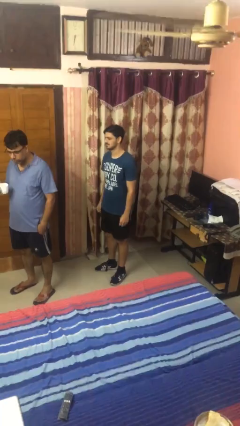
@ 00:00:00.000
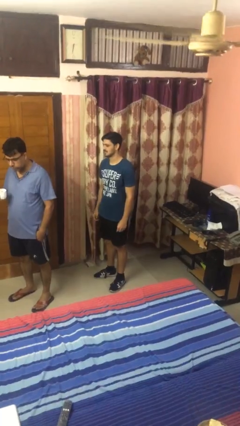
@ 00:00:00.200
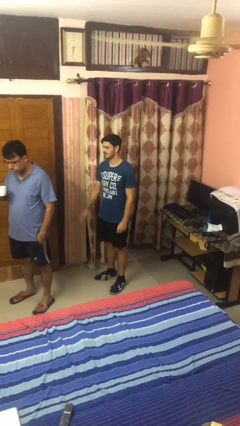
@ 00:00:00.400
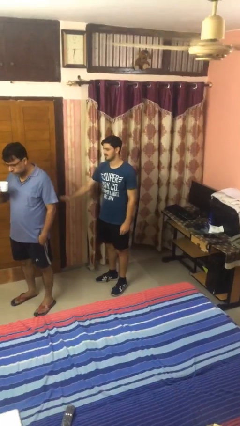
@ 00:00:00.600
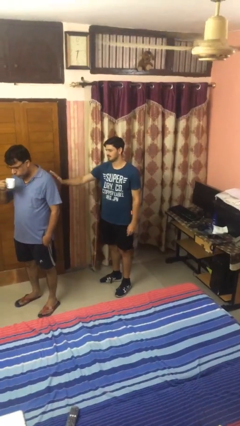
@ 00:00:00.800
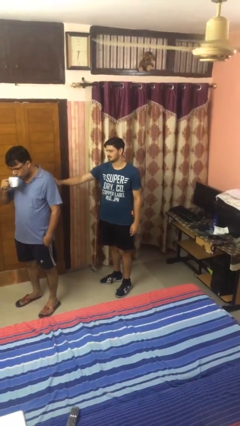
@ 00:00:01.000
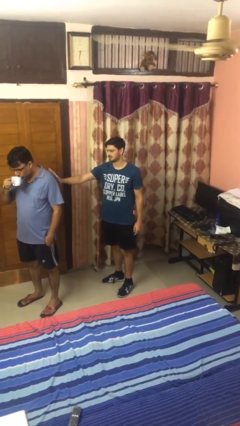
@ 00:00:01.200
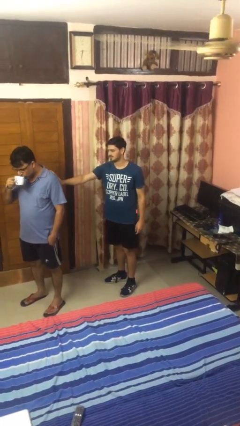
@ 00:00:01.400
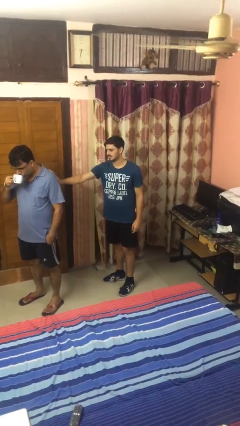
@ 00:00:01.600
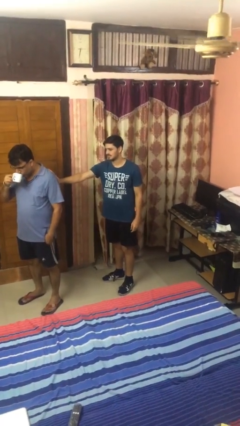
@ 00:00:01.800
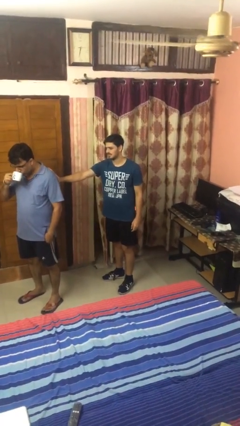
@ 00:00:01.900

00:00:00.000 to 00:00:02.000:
person touches back of person

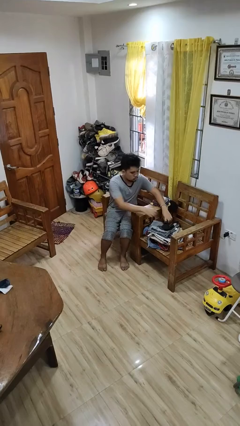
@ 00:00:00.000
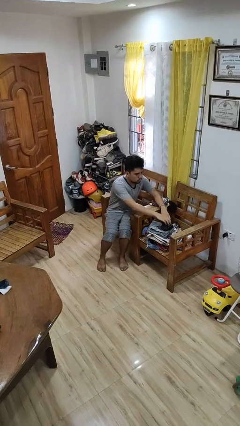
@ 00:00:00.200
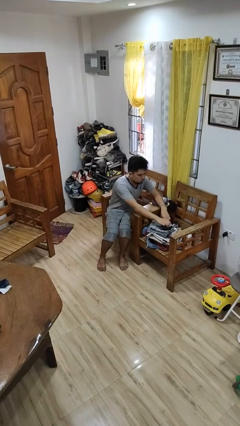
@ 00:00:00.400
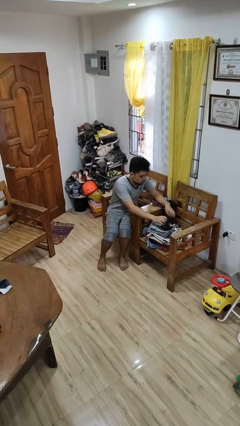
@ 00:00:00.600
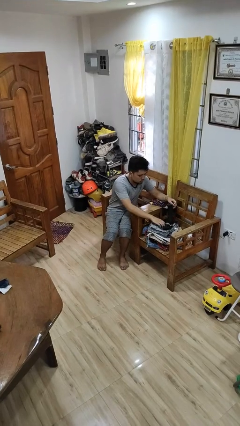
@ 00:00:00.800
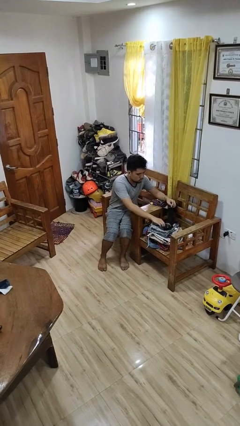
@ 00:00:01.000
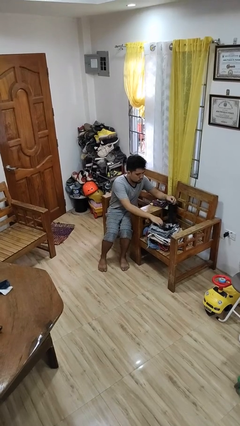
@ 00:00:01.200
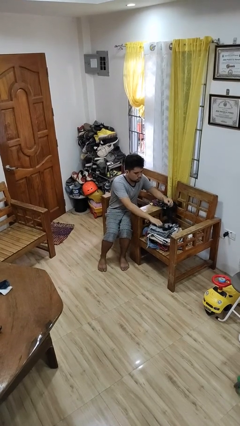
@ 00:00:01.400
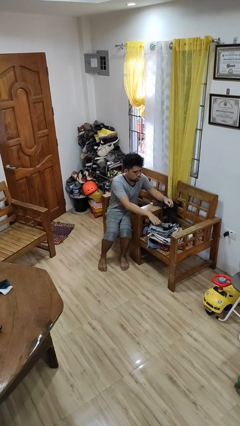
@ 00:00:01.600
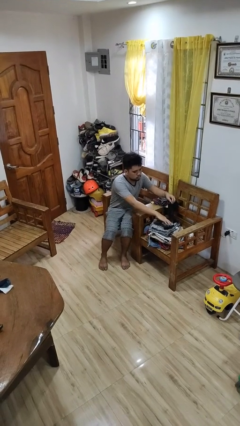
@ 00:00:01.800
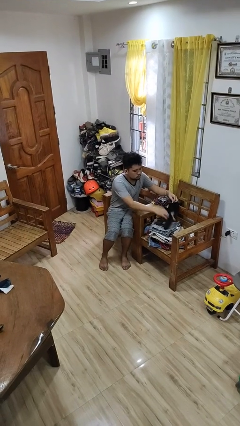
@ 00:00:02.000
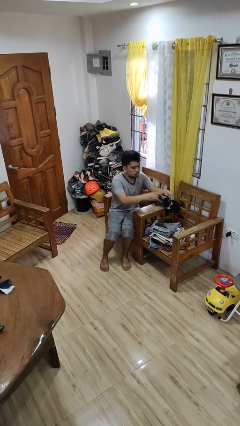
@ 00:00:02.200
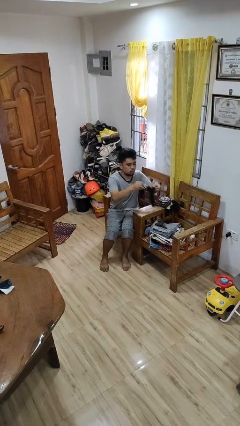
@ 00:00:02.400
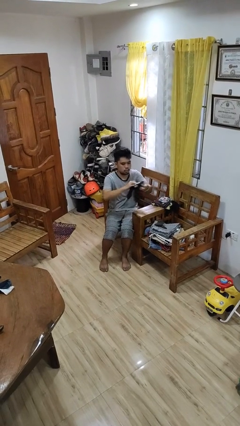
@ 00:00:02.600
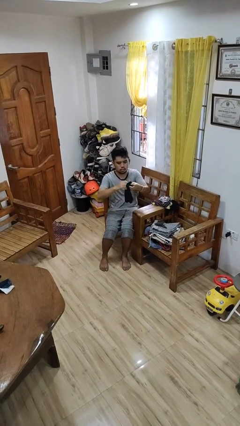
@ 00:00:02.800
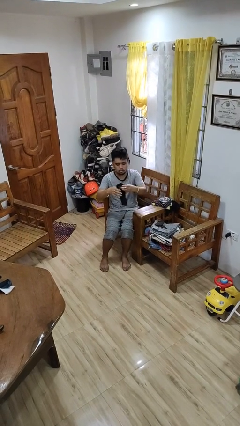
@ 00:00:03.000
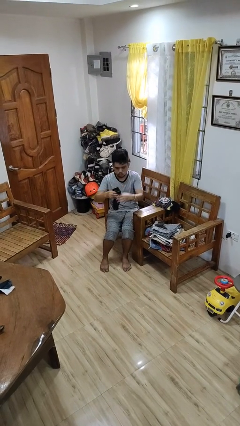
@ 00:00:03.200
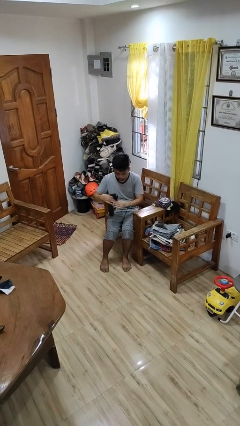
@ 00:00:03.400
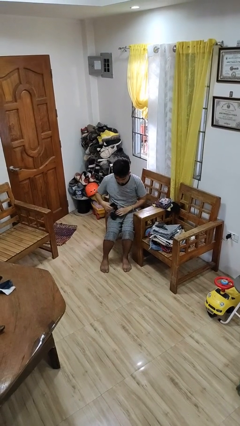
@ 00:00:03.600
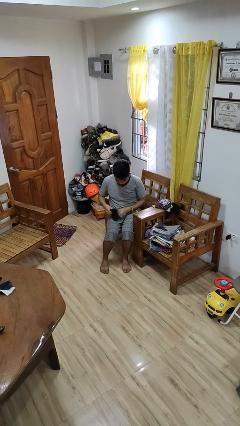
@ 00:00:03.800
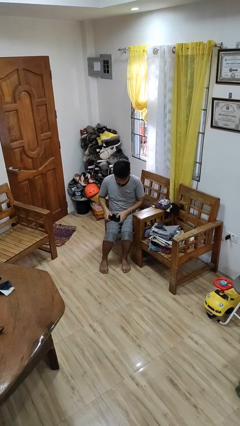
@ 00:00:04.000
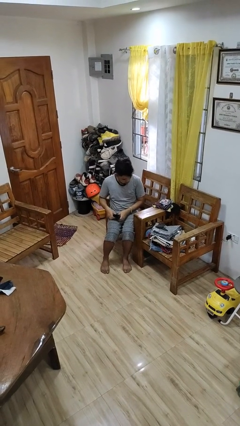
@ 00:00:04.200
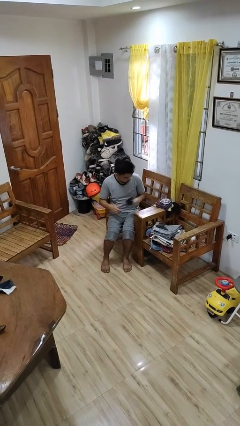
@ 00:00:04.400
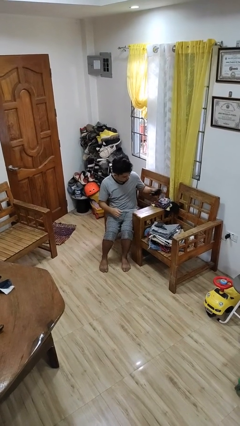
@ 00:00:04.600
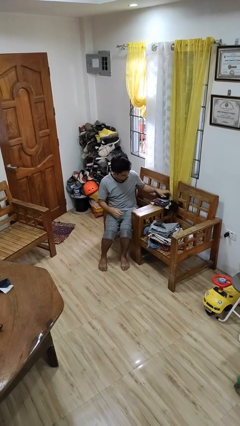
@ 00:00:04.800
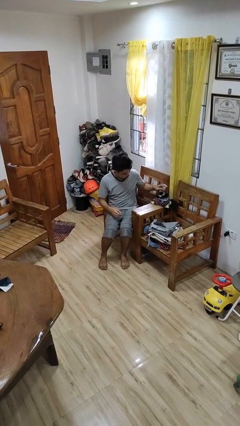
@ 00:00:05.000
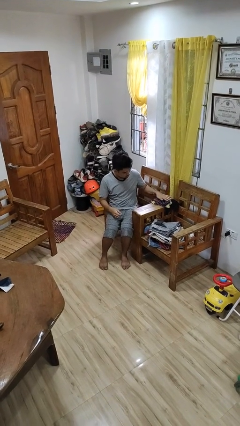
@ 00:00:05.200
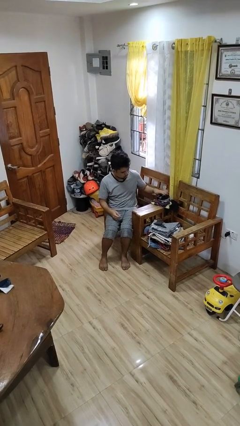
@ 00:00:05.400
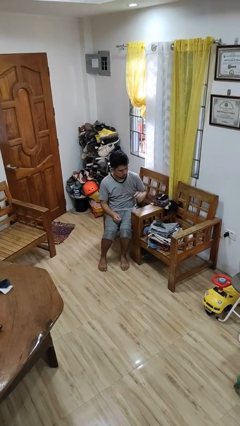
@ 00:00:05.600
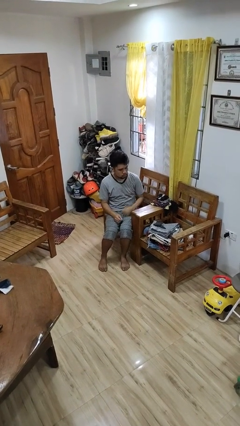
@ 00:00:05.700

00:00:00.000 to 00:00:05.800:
person folds socks

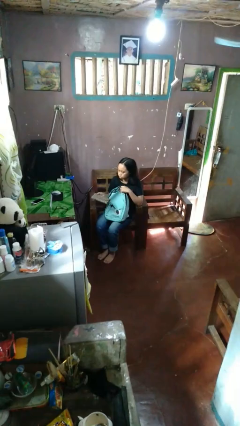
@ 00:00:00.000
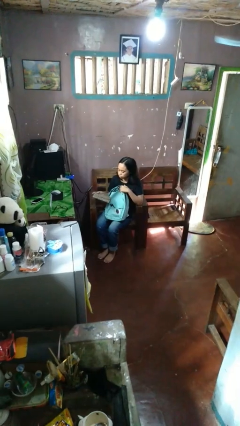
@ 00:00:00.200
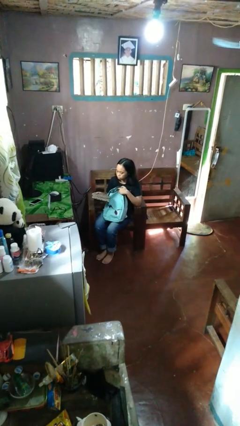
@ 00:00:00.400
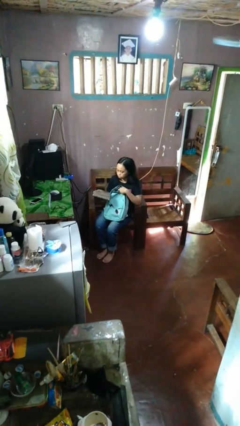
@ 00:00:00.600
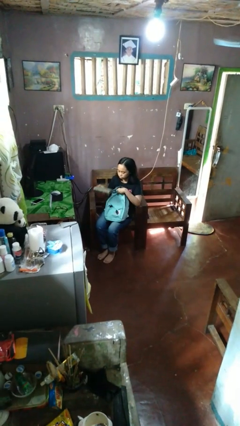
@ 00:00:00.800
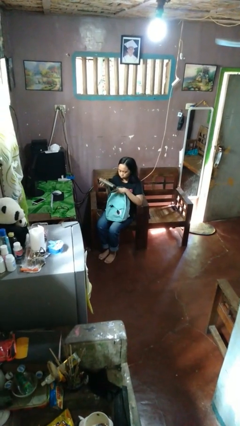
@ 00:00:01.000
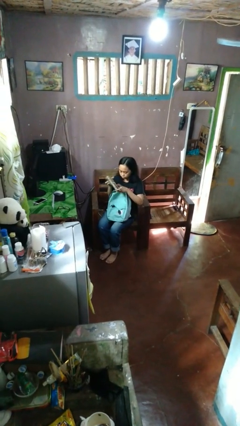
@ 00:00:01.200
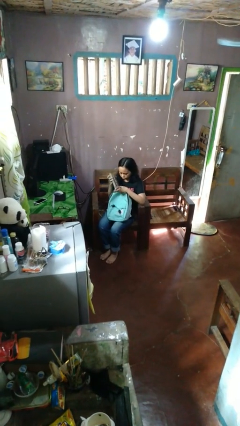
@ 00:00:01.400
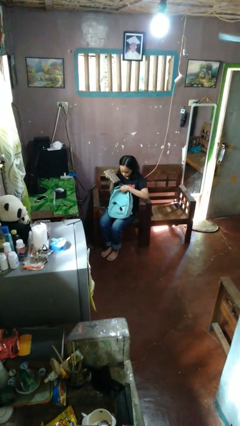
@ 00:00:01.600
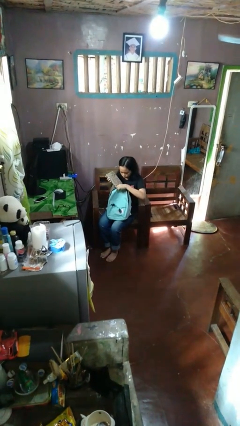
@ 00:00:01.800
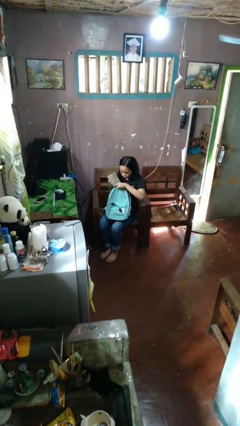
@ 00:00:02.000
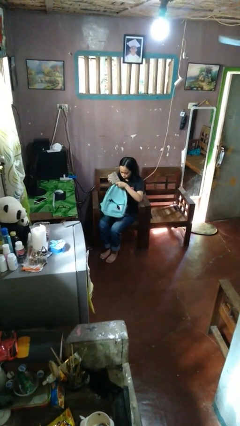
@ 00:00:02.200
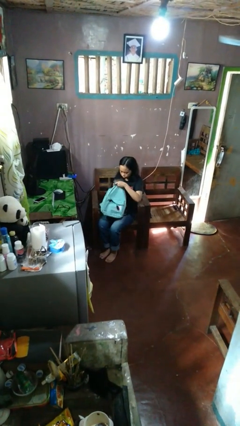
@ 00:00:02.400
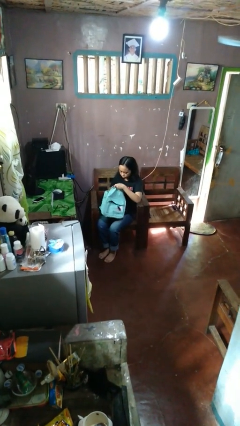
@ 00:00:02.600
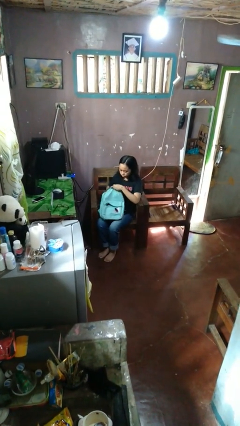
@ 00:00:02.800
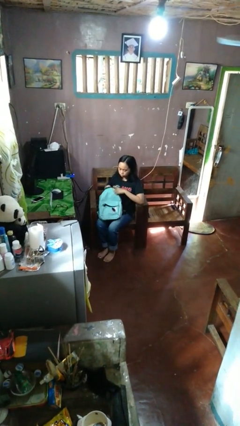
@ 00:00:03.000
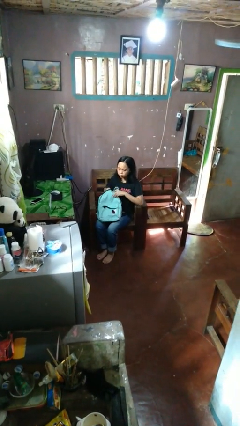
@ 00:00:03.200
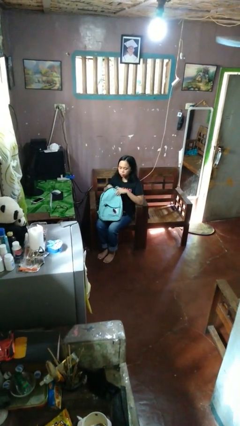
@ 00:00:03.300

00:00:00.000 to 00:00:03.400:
person puts object into backpack

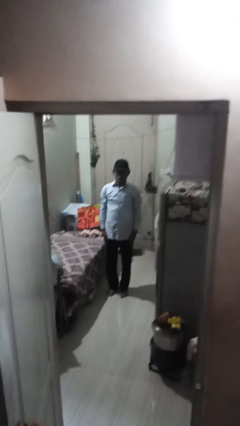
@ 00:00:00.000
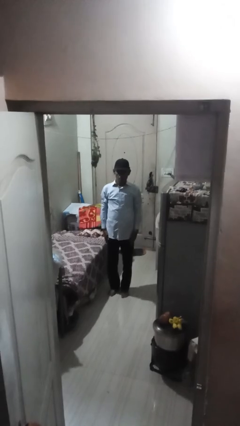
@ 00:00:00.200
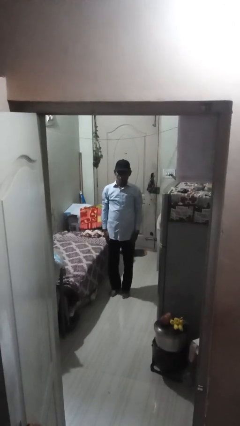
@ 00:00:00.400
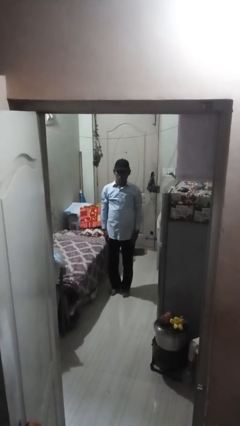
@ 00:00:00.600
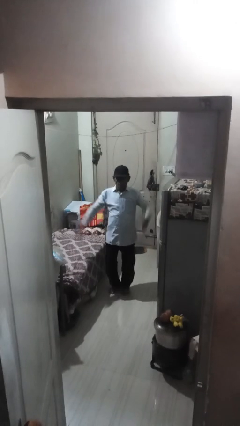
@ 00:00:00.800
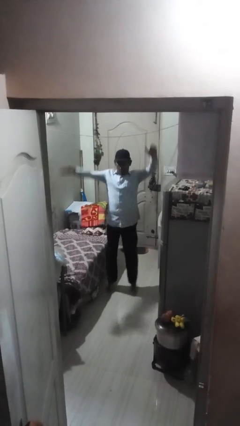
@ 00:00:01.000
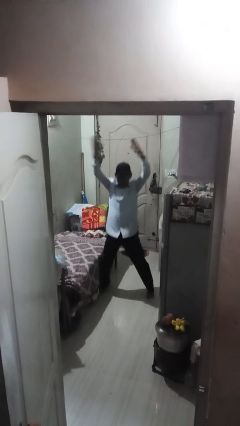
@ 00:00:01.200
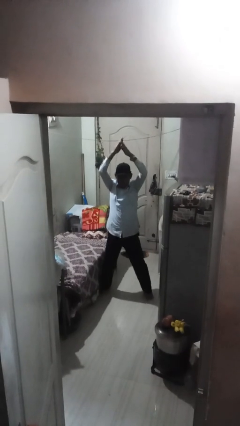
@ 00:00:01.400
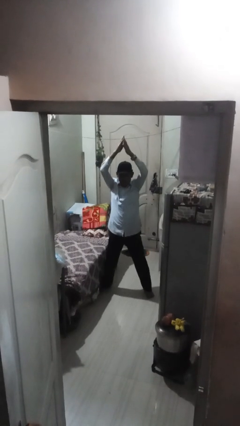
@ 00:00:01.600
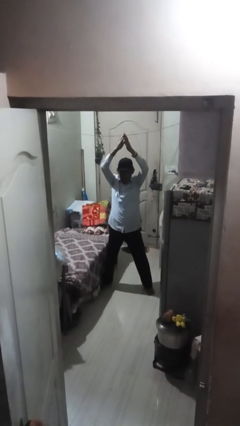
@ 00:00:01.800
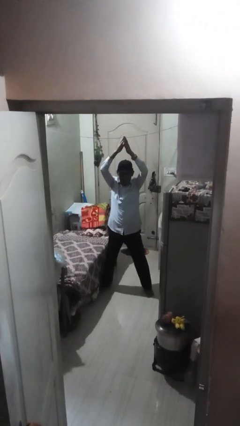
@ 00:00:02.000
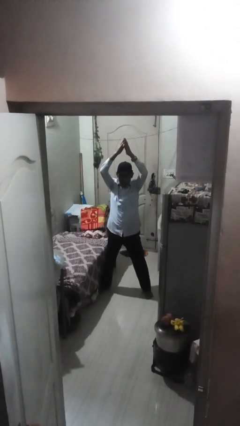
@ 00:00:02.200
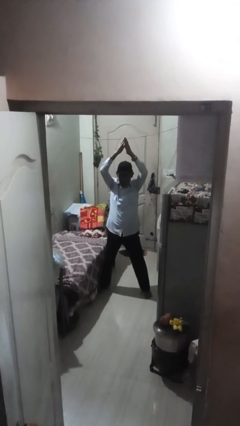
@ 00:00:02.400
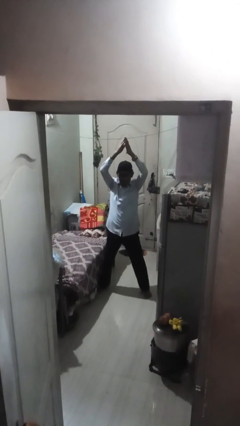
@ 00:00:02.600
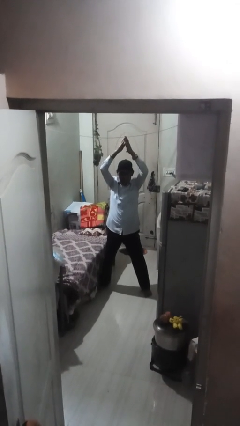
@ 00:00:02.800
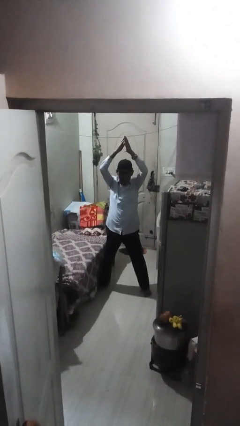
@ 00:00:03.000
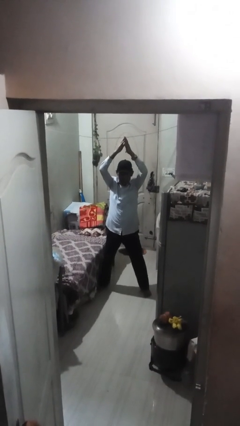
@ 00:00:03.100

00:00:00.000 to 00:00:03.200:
person exercises with jumping jacks

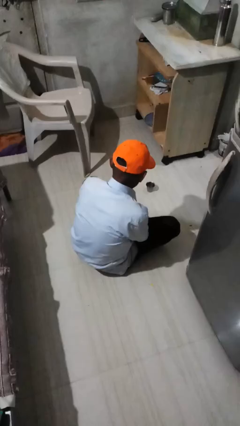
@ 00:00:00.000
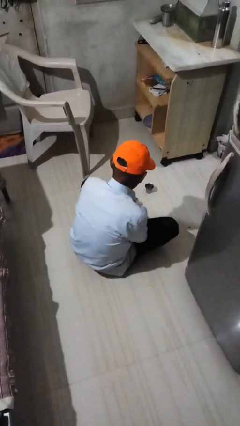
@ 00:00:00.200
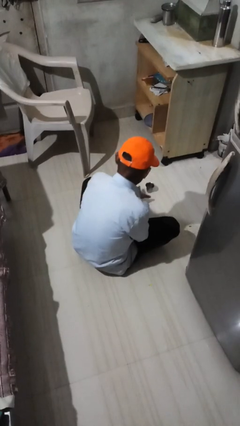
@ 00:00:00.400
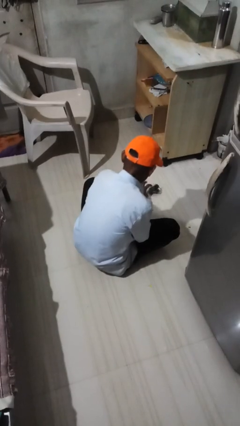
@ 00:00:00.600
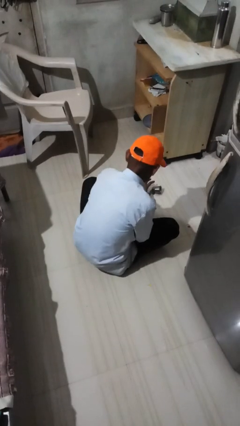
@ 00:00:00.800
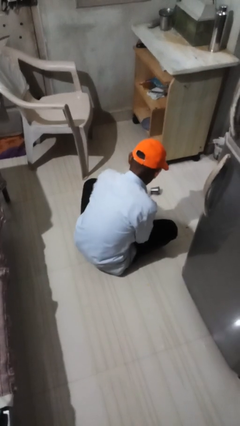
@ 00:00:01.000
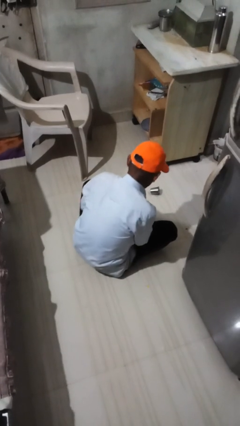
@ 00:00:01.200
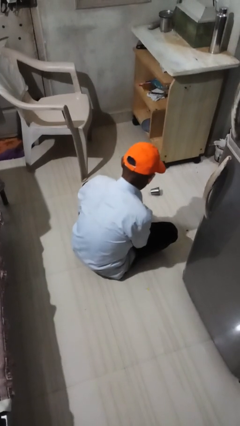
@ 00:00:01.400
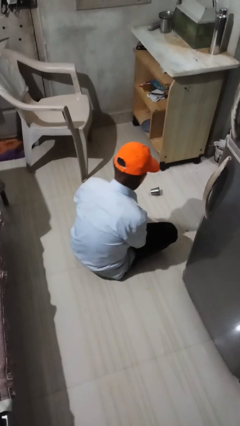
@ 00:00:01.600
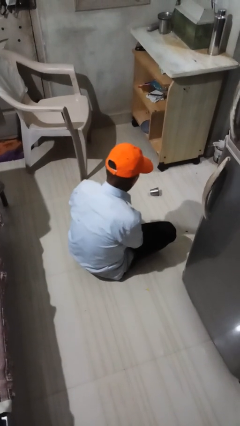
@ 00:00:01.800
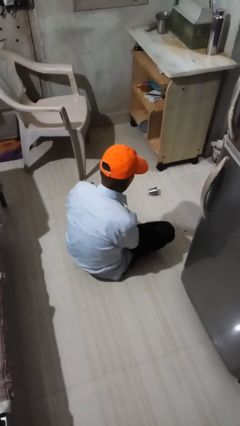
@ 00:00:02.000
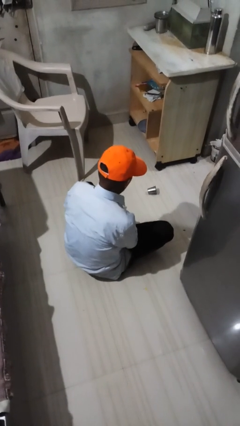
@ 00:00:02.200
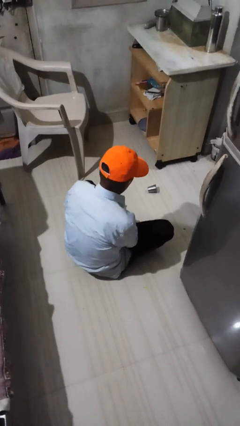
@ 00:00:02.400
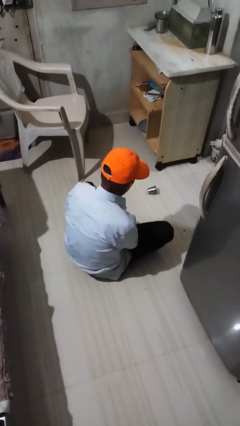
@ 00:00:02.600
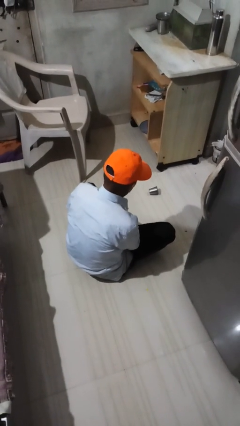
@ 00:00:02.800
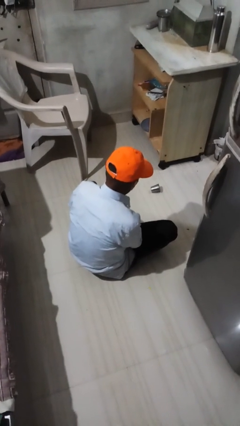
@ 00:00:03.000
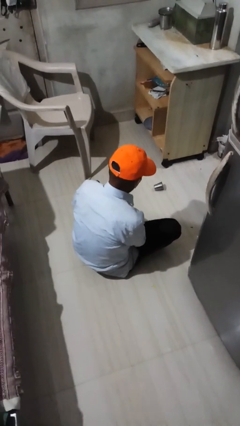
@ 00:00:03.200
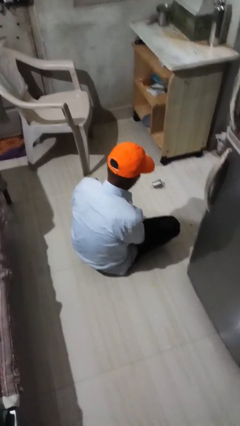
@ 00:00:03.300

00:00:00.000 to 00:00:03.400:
person spills on floor
